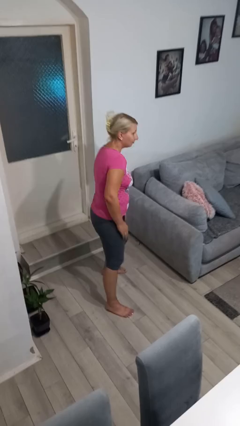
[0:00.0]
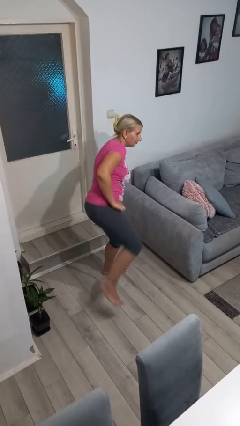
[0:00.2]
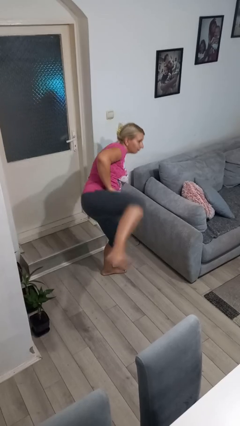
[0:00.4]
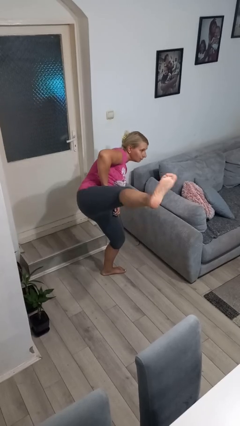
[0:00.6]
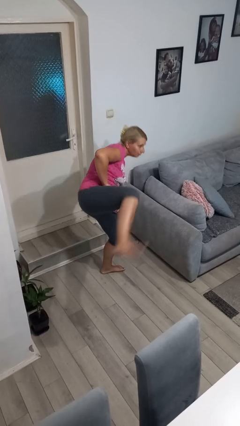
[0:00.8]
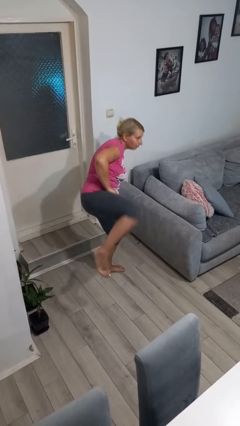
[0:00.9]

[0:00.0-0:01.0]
person karate kicks

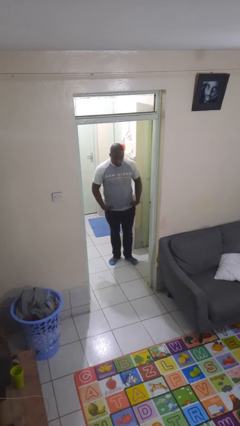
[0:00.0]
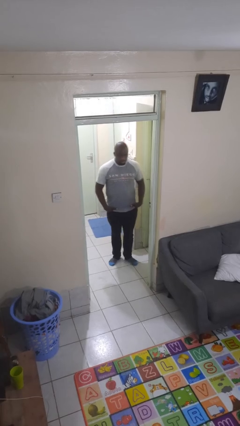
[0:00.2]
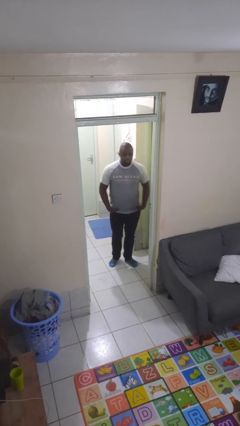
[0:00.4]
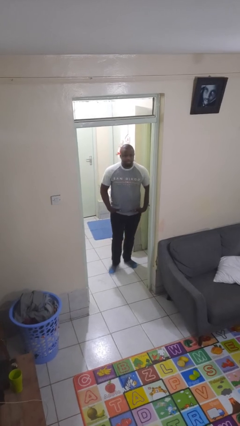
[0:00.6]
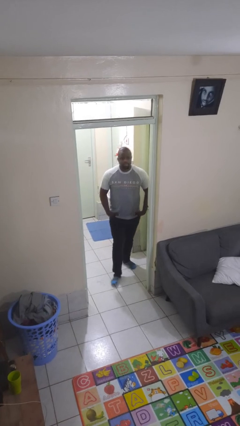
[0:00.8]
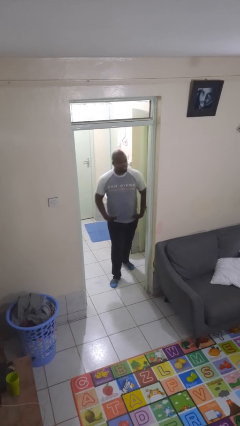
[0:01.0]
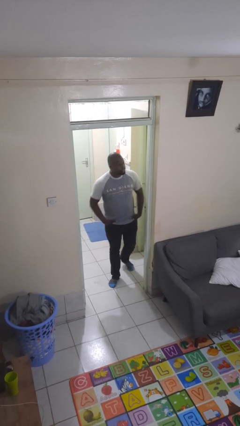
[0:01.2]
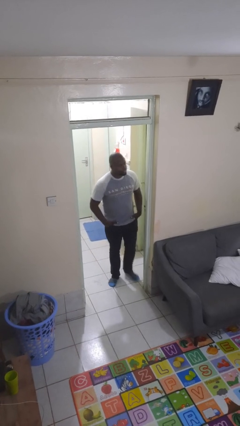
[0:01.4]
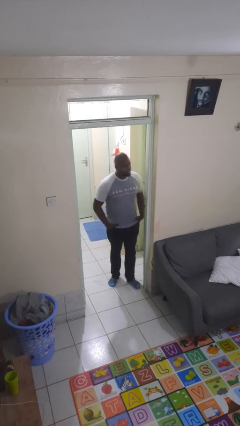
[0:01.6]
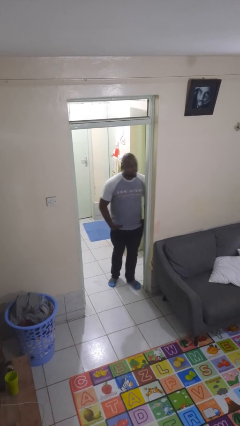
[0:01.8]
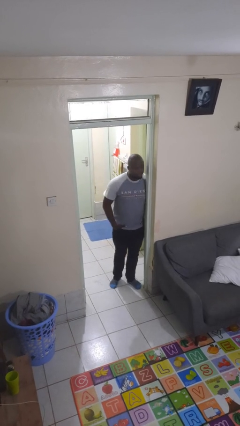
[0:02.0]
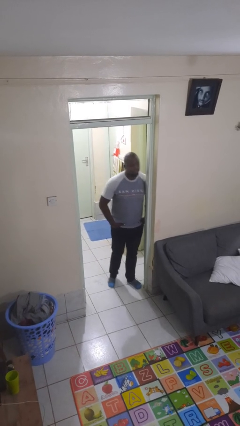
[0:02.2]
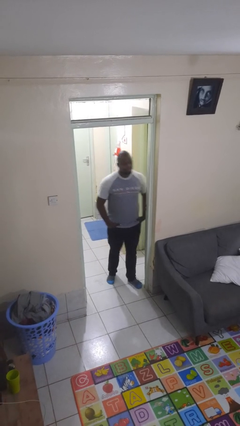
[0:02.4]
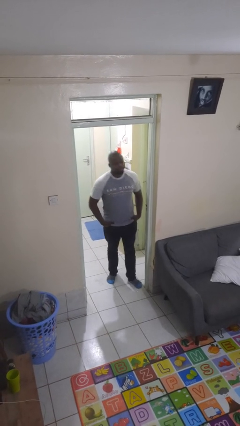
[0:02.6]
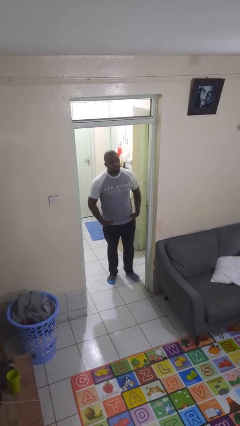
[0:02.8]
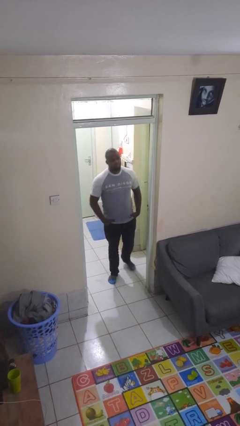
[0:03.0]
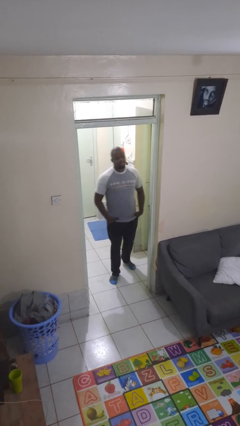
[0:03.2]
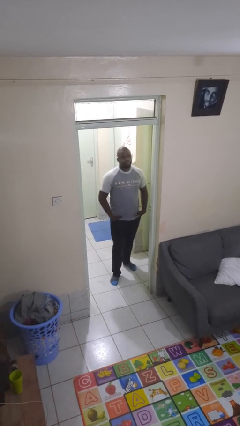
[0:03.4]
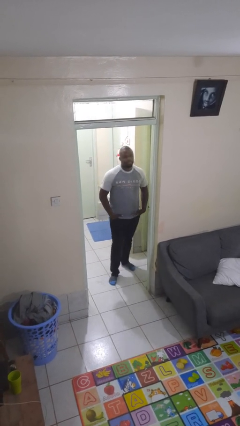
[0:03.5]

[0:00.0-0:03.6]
person bumps into wall

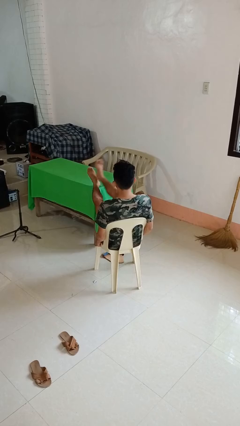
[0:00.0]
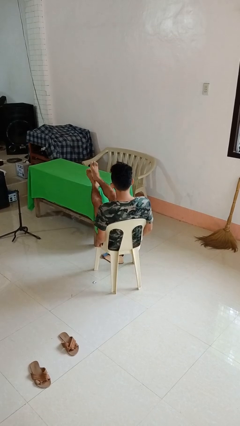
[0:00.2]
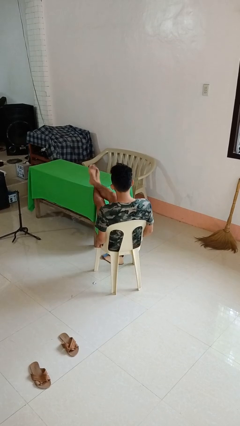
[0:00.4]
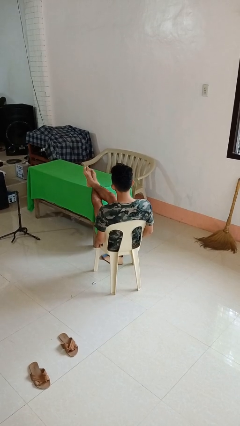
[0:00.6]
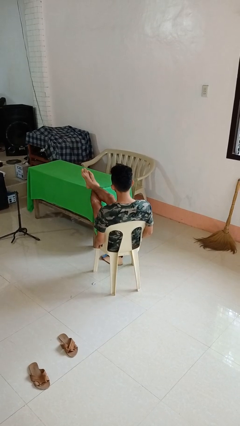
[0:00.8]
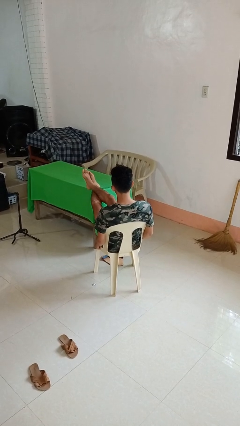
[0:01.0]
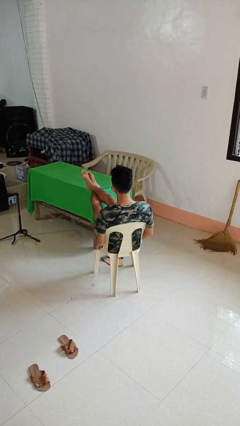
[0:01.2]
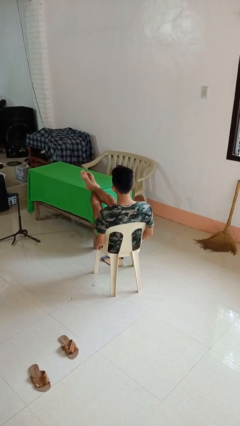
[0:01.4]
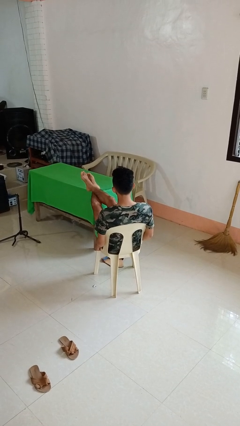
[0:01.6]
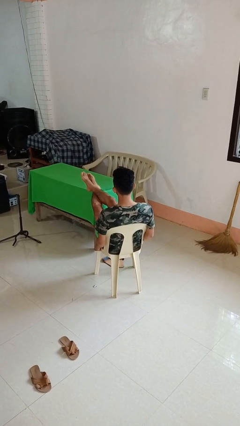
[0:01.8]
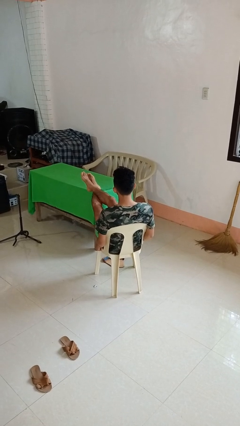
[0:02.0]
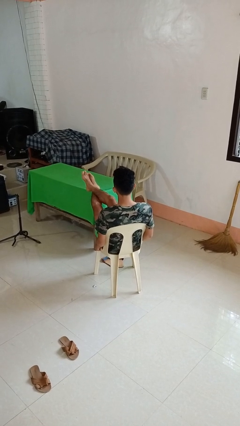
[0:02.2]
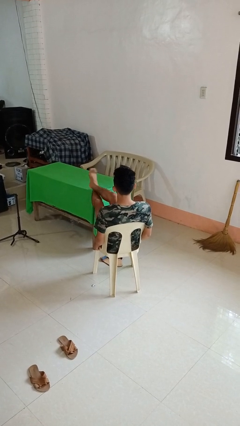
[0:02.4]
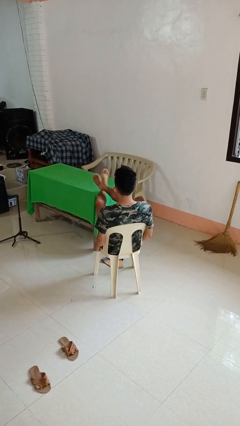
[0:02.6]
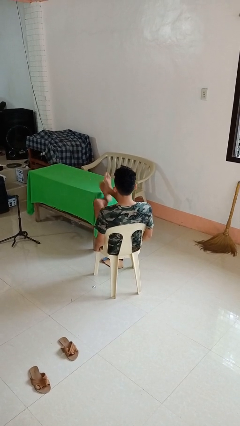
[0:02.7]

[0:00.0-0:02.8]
person puts feet up

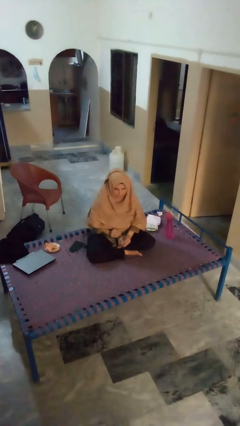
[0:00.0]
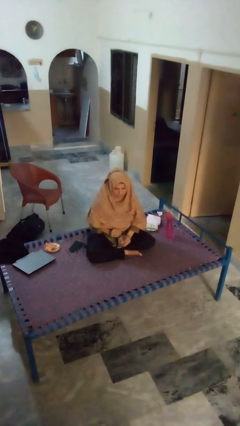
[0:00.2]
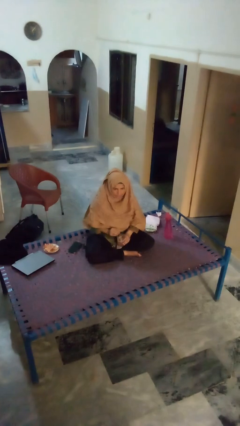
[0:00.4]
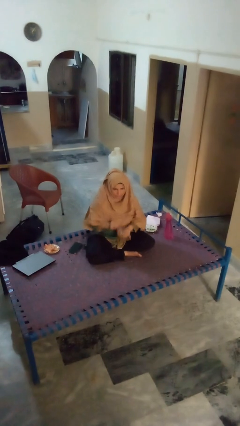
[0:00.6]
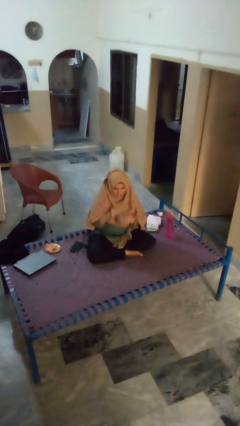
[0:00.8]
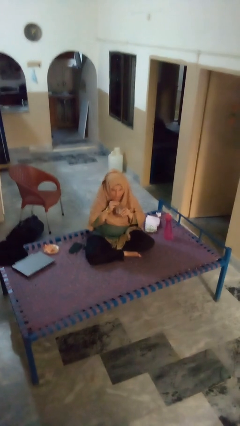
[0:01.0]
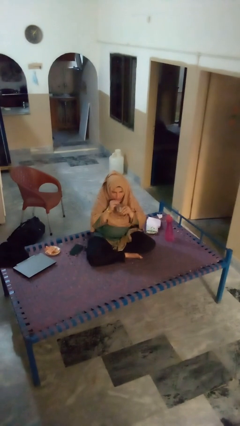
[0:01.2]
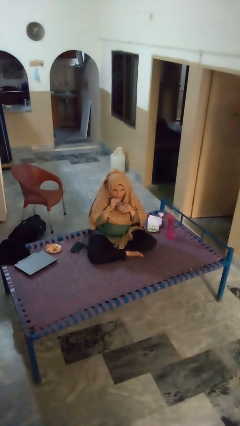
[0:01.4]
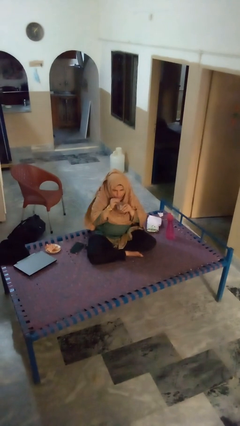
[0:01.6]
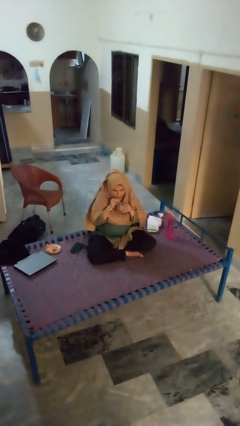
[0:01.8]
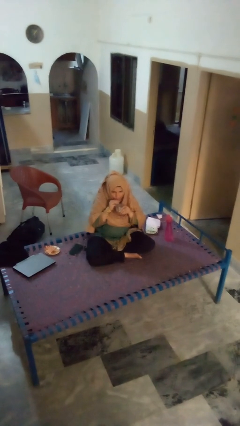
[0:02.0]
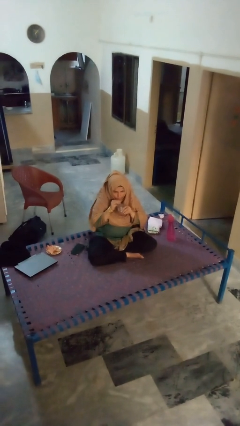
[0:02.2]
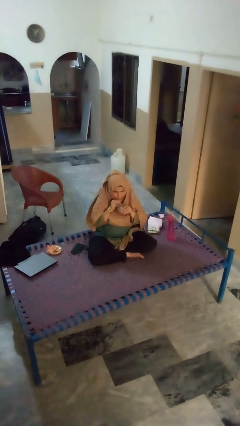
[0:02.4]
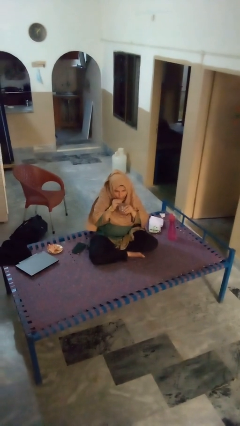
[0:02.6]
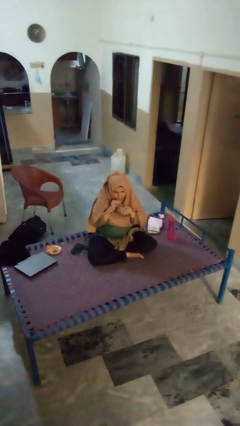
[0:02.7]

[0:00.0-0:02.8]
person drinks from straw

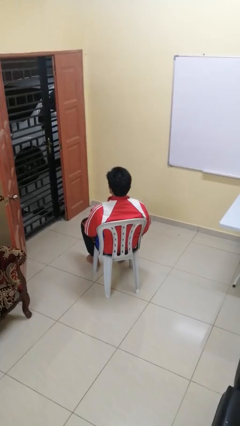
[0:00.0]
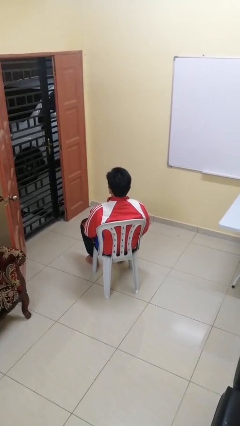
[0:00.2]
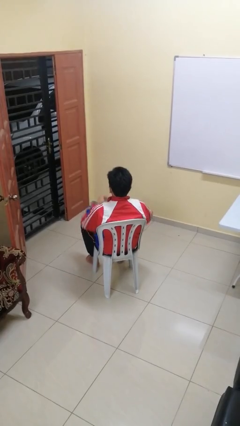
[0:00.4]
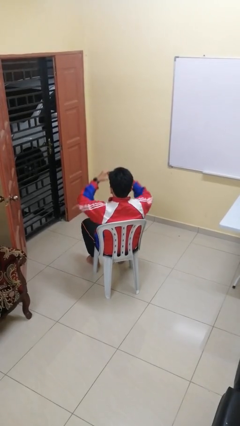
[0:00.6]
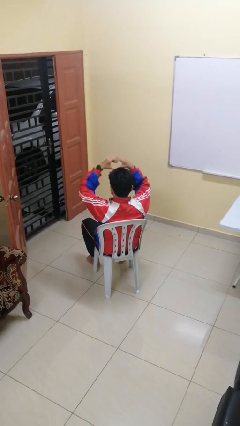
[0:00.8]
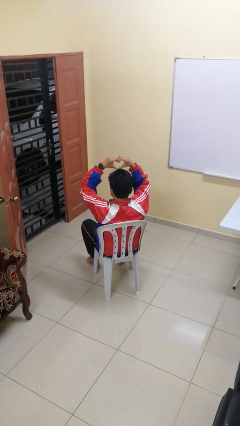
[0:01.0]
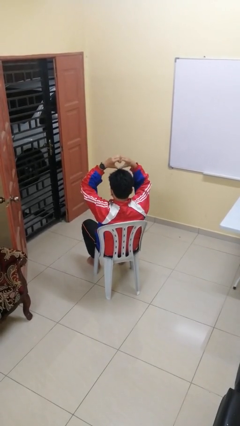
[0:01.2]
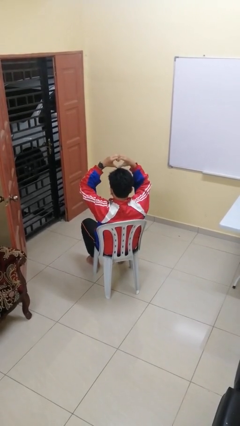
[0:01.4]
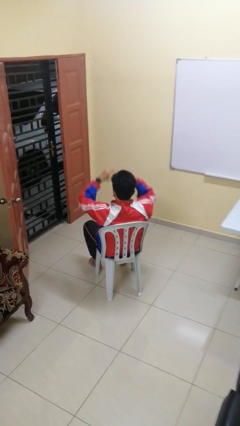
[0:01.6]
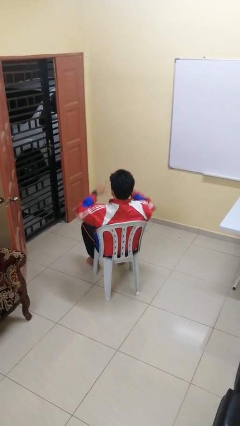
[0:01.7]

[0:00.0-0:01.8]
person gestures heart

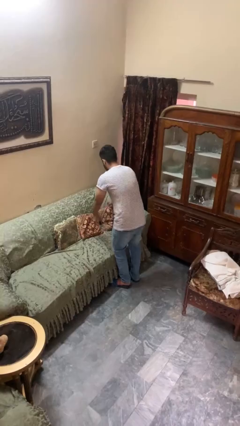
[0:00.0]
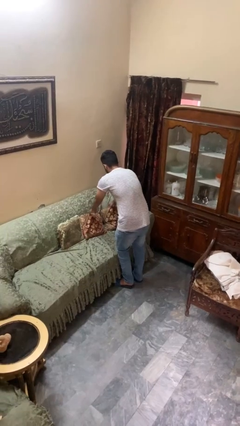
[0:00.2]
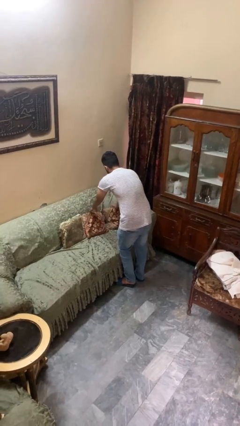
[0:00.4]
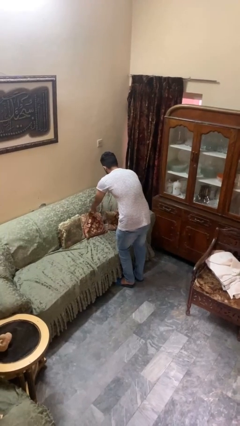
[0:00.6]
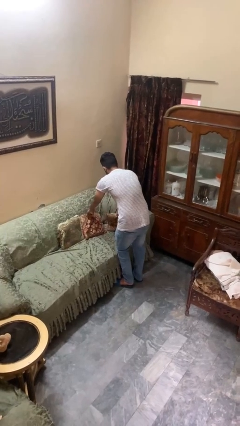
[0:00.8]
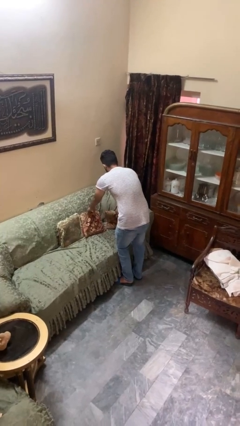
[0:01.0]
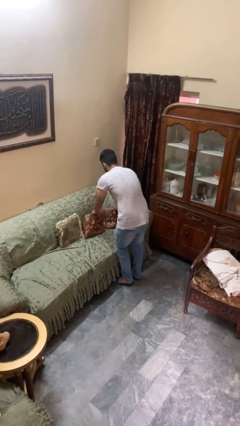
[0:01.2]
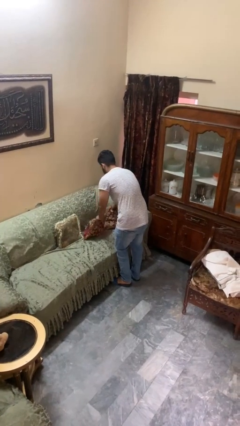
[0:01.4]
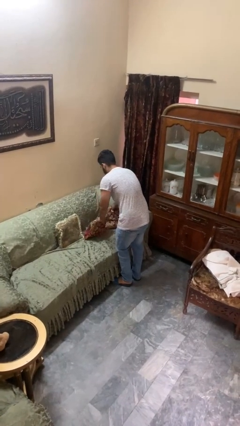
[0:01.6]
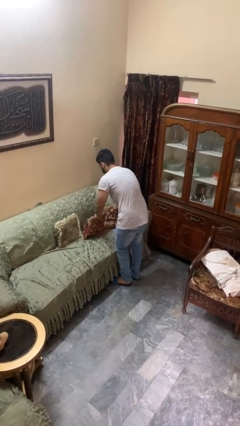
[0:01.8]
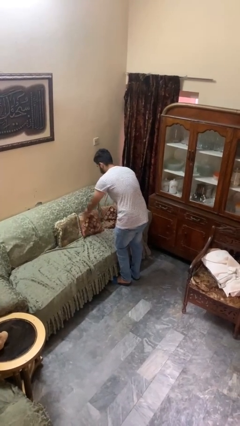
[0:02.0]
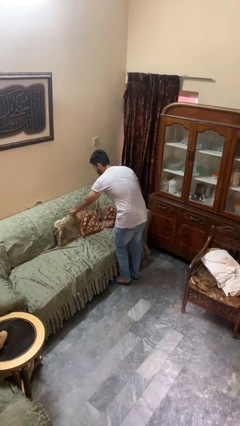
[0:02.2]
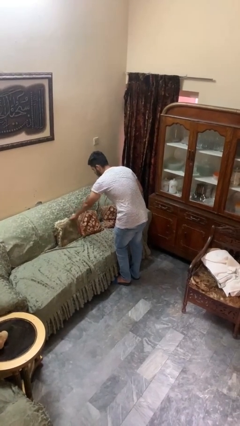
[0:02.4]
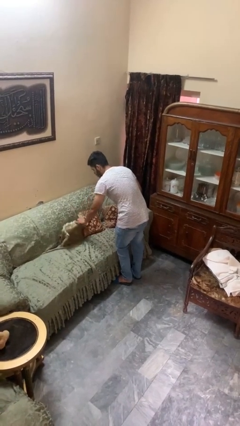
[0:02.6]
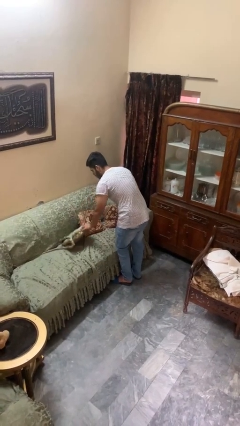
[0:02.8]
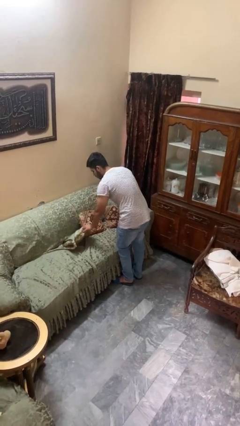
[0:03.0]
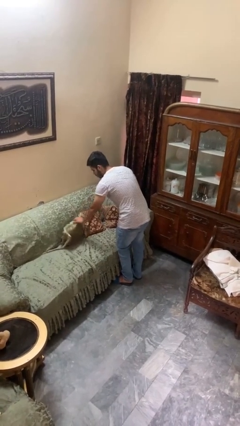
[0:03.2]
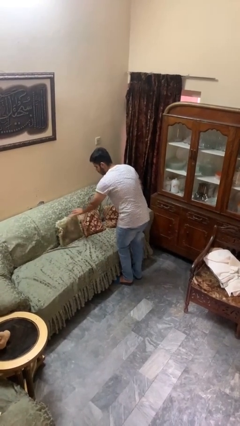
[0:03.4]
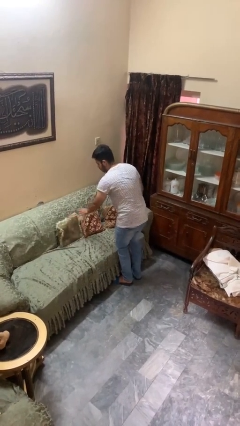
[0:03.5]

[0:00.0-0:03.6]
person searches in couch

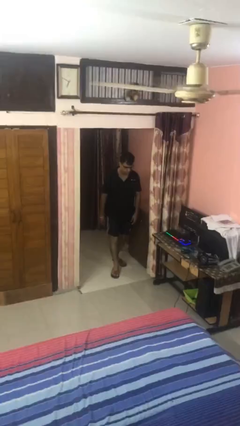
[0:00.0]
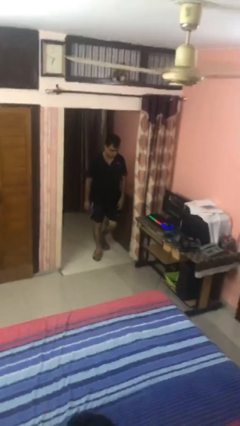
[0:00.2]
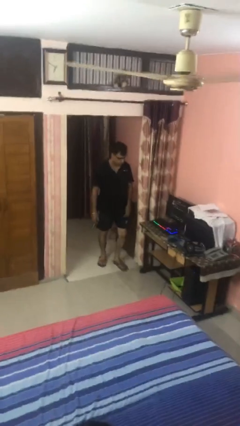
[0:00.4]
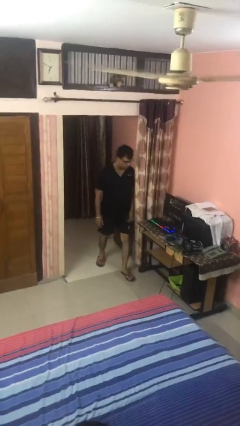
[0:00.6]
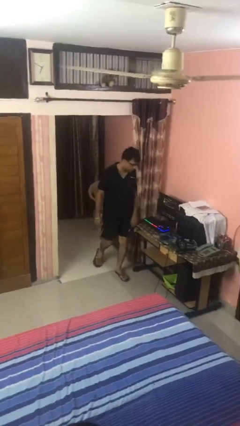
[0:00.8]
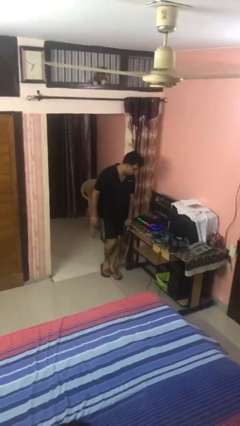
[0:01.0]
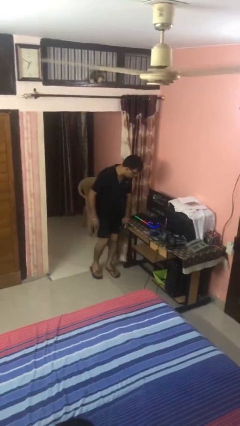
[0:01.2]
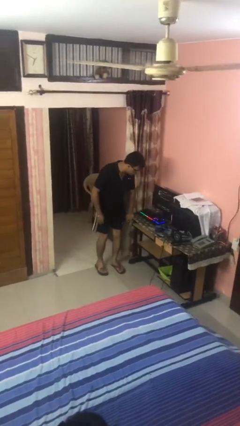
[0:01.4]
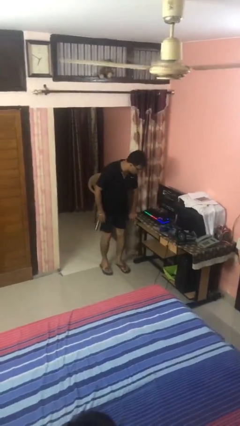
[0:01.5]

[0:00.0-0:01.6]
person bumps into table

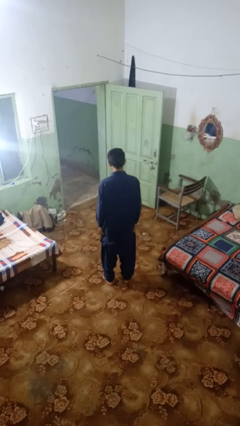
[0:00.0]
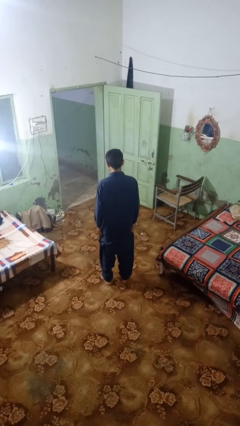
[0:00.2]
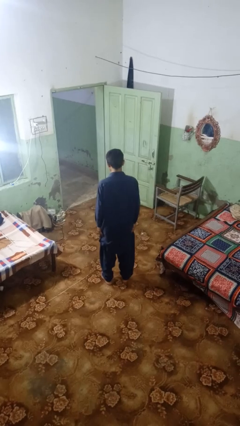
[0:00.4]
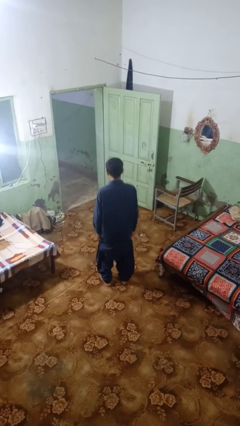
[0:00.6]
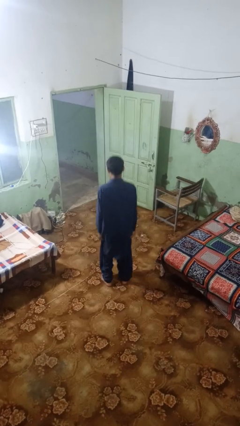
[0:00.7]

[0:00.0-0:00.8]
person jumps
